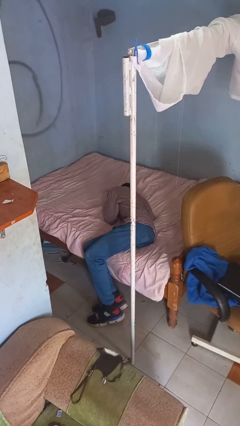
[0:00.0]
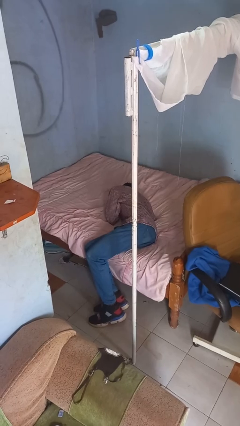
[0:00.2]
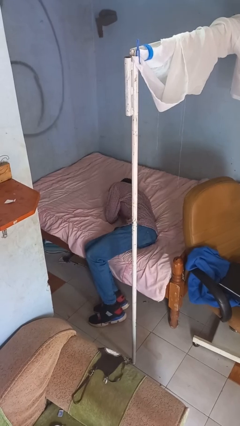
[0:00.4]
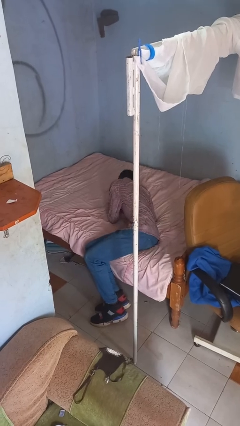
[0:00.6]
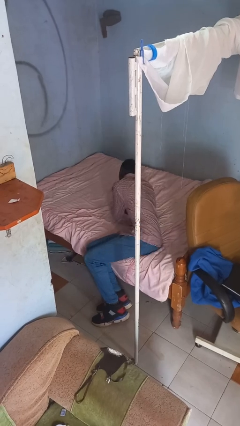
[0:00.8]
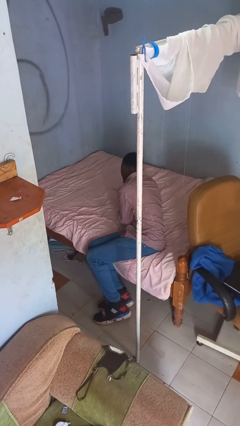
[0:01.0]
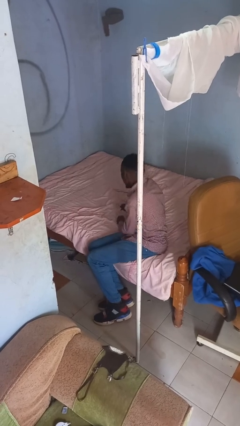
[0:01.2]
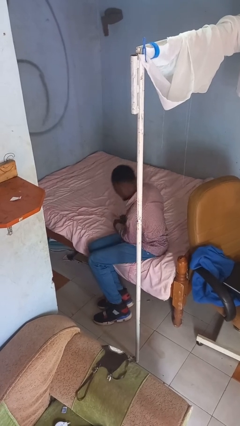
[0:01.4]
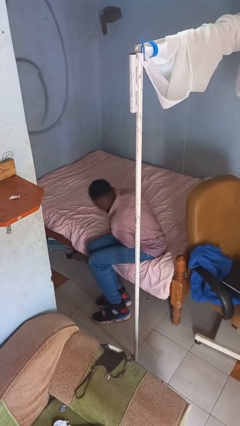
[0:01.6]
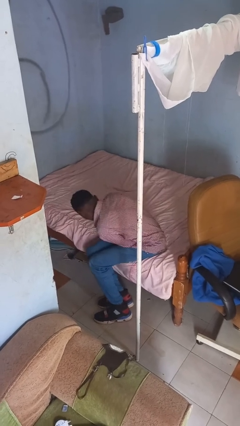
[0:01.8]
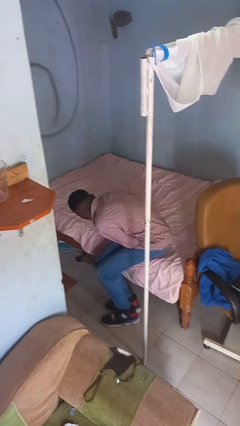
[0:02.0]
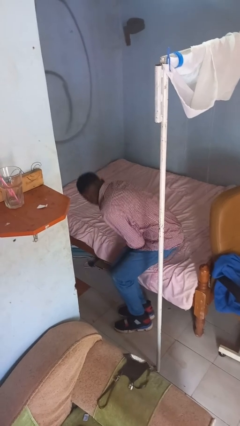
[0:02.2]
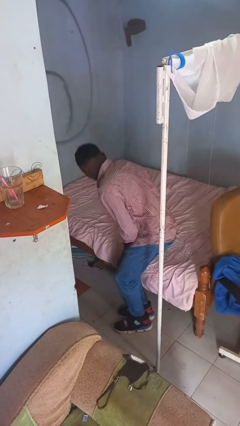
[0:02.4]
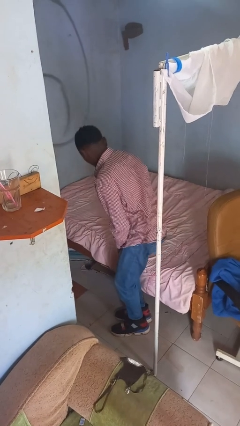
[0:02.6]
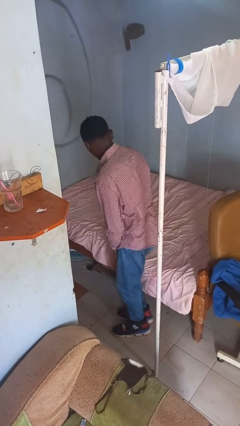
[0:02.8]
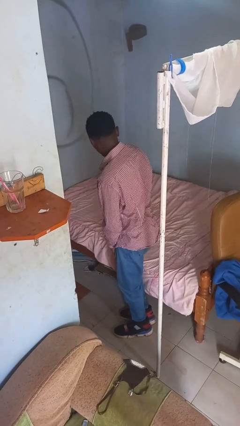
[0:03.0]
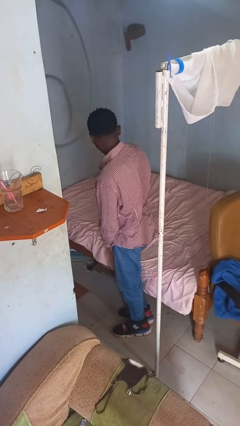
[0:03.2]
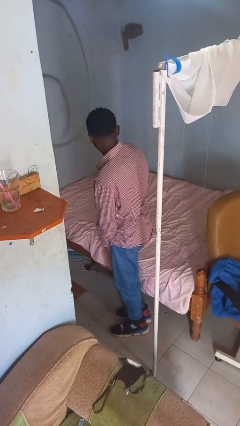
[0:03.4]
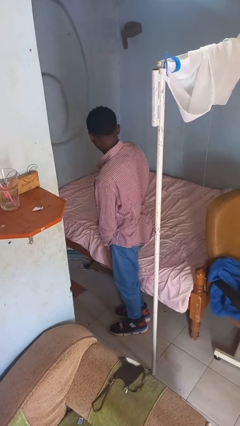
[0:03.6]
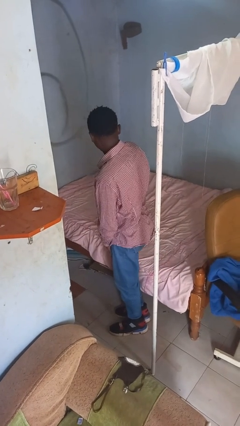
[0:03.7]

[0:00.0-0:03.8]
person stands up

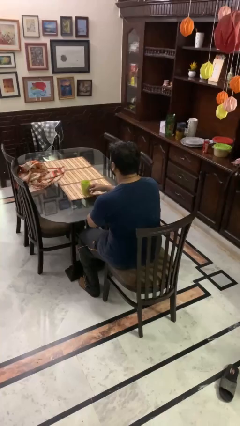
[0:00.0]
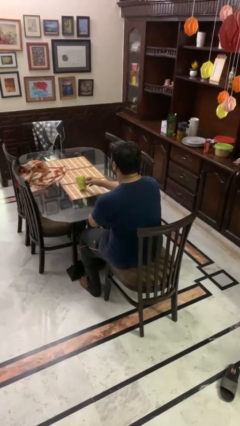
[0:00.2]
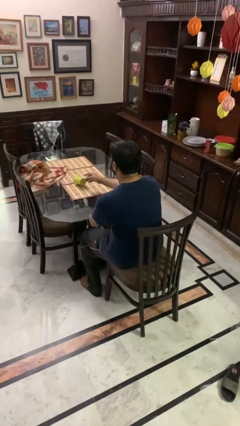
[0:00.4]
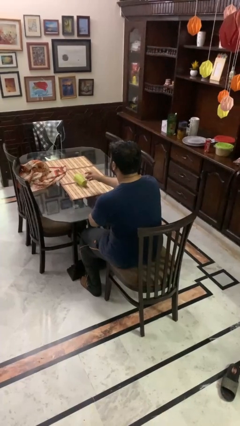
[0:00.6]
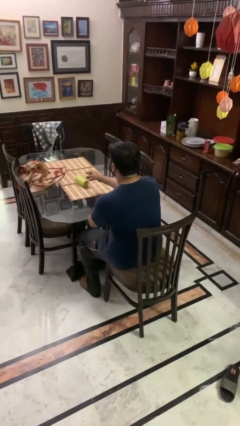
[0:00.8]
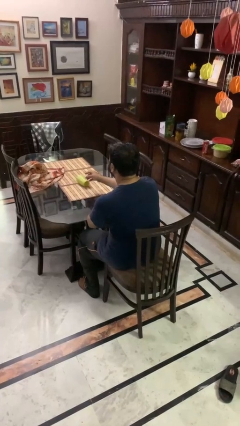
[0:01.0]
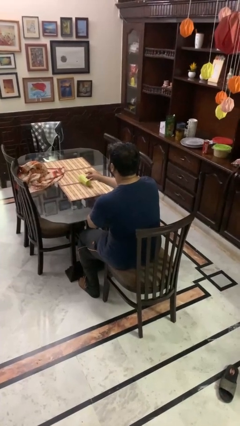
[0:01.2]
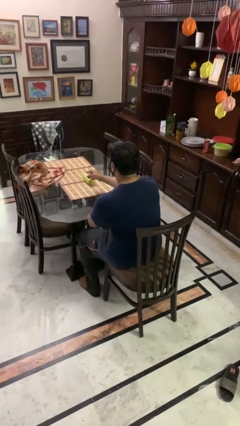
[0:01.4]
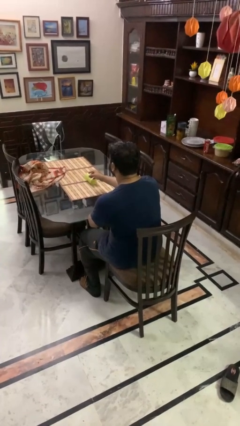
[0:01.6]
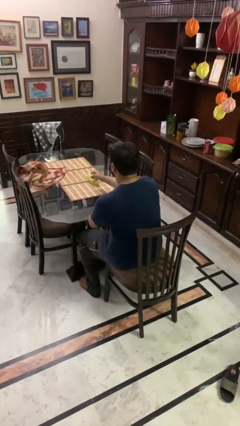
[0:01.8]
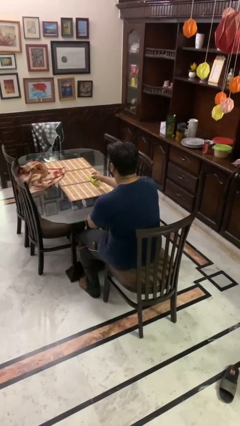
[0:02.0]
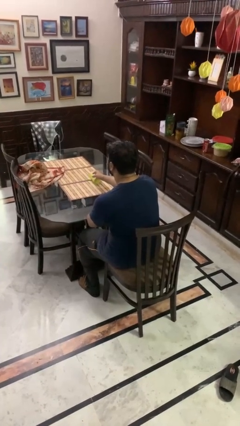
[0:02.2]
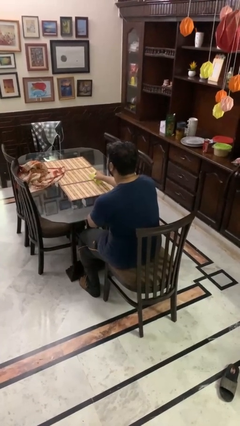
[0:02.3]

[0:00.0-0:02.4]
person knocks over glass

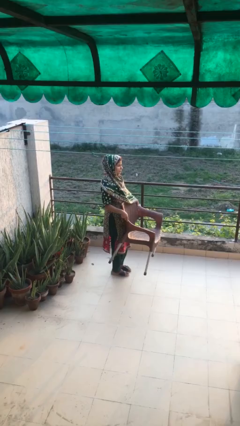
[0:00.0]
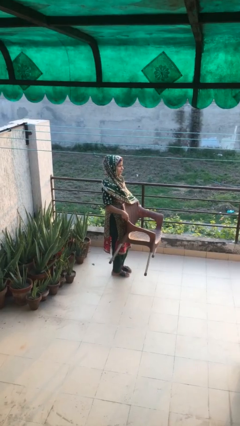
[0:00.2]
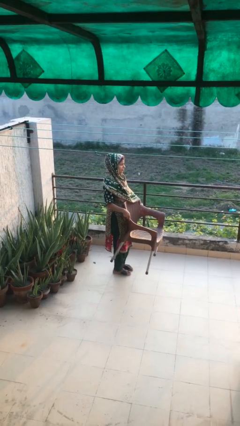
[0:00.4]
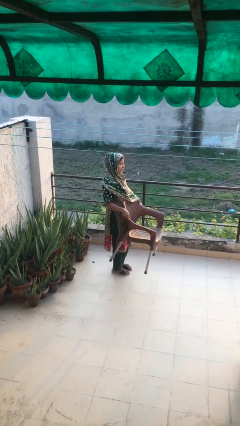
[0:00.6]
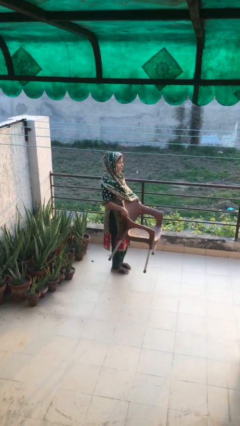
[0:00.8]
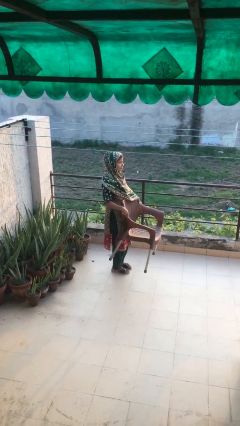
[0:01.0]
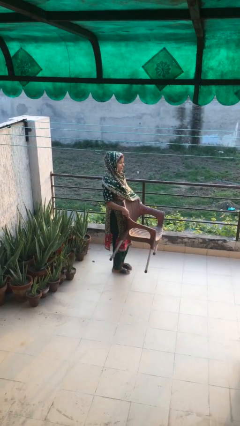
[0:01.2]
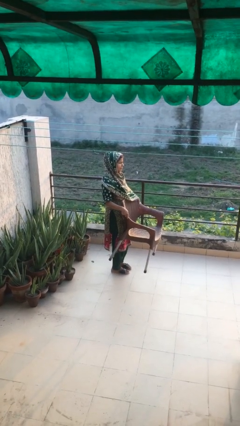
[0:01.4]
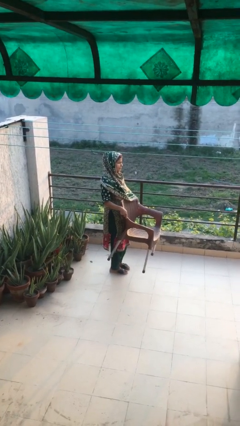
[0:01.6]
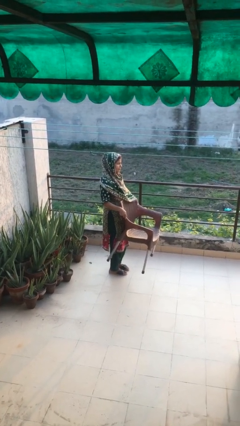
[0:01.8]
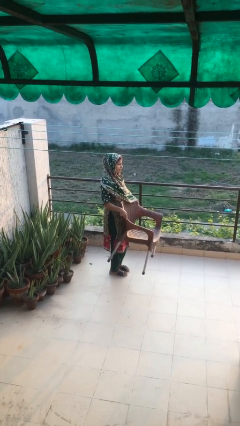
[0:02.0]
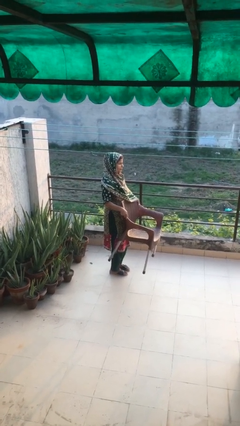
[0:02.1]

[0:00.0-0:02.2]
person carries heavy object

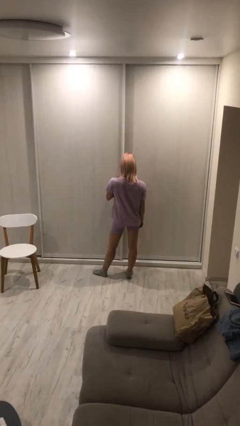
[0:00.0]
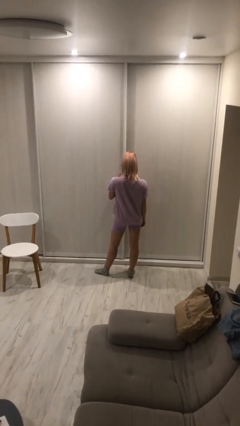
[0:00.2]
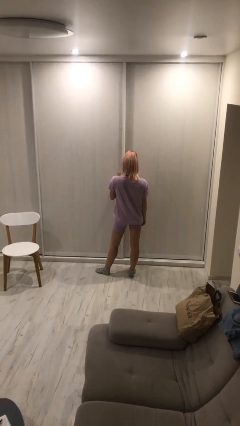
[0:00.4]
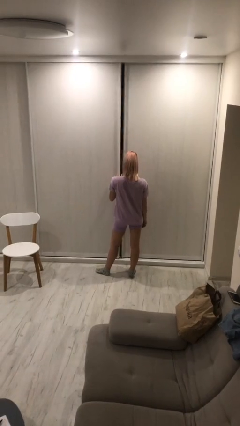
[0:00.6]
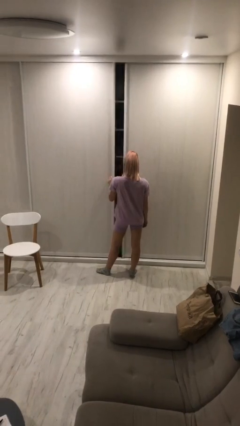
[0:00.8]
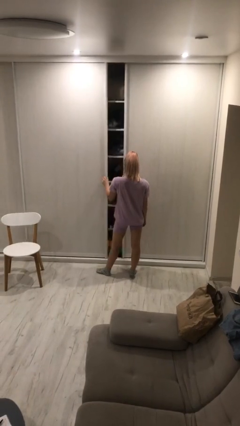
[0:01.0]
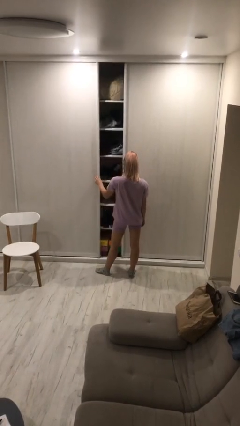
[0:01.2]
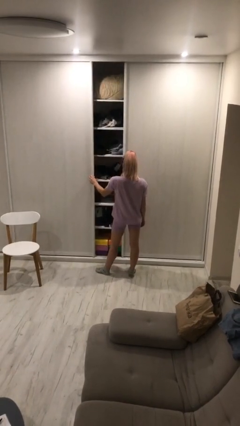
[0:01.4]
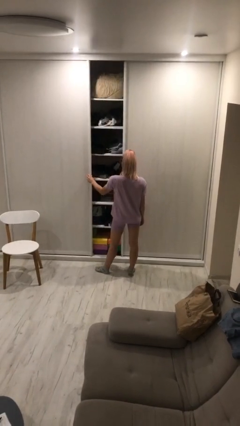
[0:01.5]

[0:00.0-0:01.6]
person opens sliding door

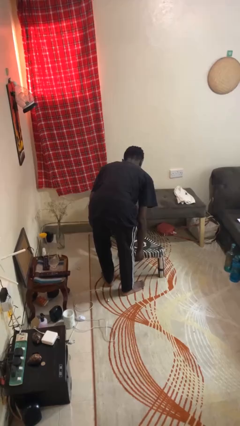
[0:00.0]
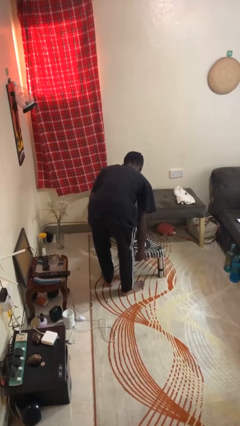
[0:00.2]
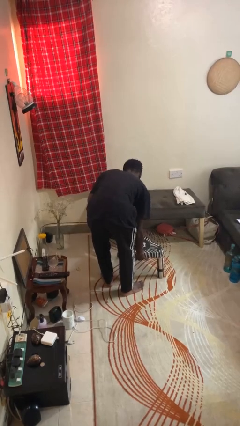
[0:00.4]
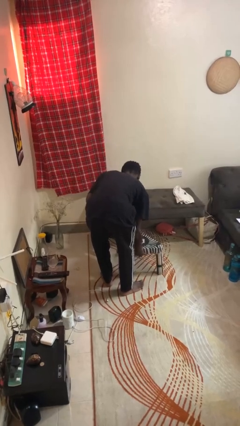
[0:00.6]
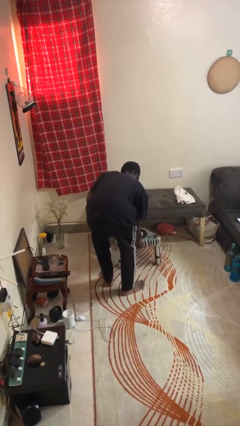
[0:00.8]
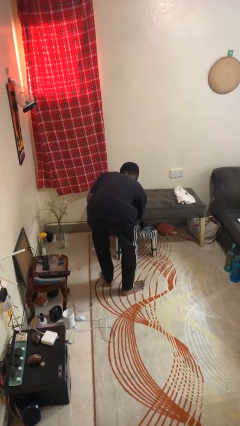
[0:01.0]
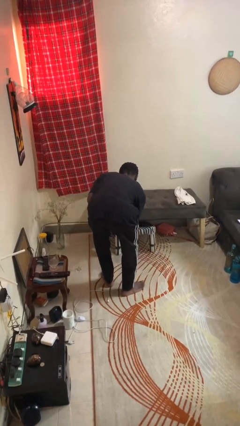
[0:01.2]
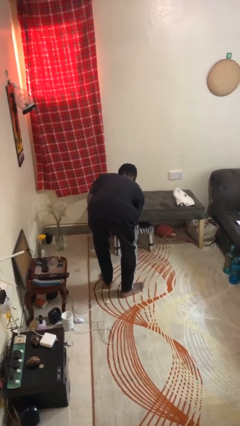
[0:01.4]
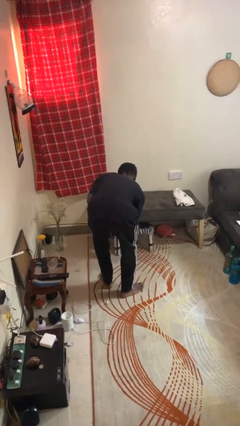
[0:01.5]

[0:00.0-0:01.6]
person pushes in chair

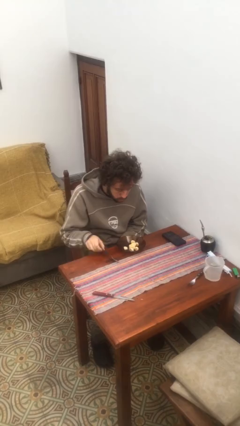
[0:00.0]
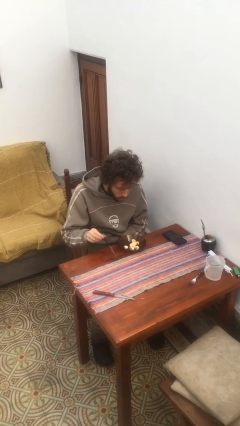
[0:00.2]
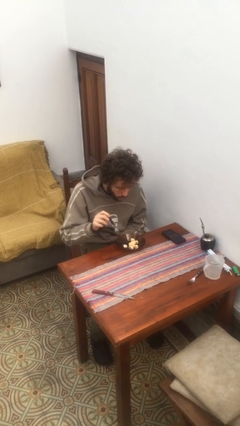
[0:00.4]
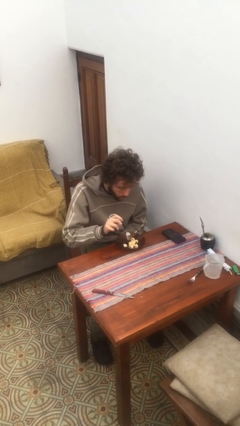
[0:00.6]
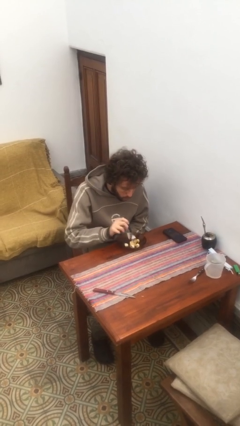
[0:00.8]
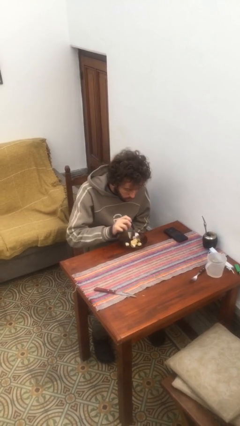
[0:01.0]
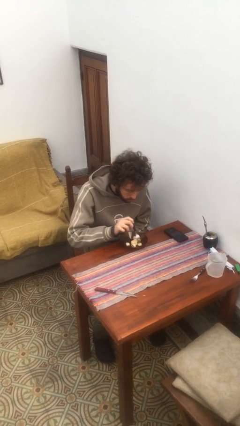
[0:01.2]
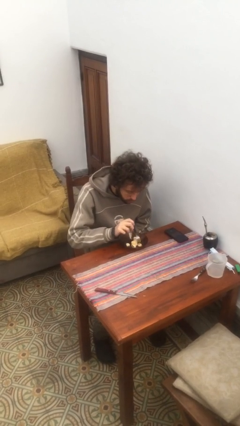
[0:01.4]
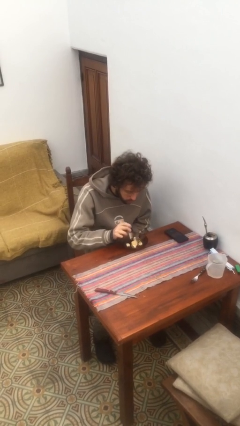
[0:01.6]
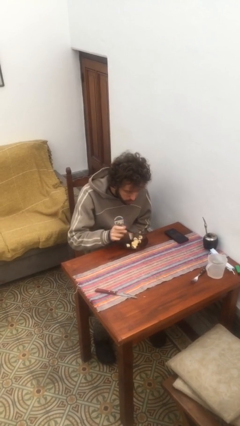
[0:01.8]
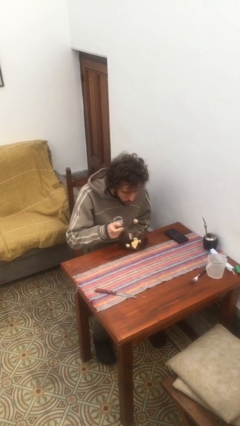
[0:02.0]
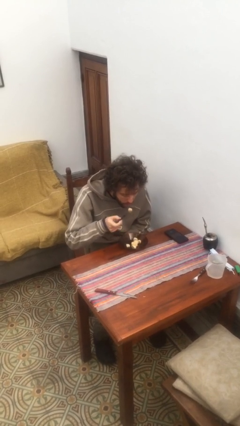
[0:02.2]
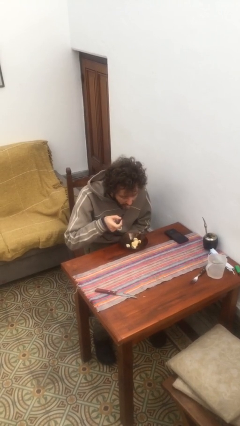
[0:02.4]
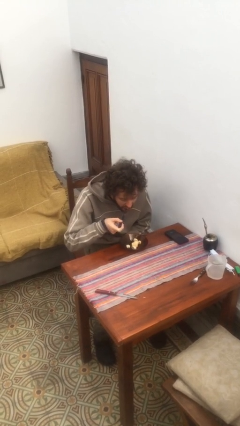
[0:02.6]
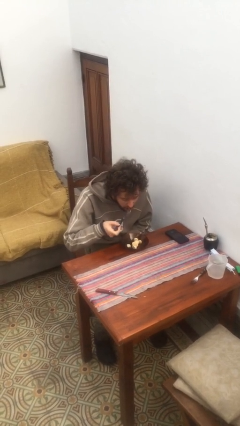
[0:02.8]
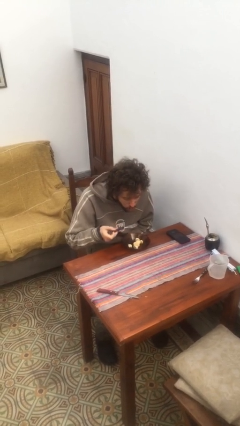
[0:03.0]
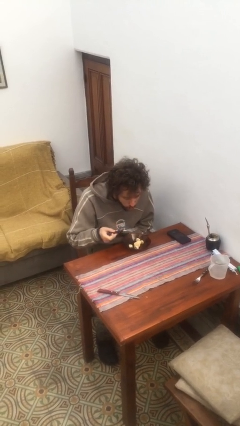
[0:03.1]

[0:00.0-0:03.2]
person eats with utensil

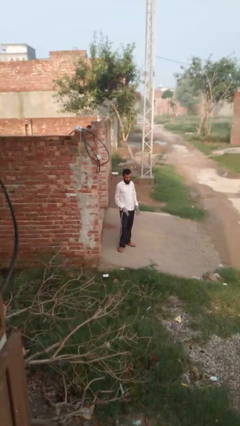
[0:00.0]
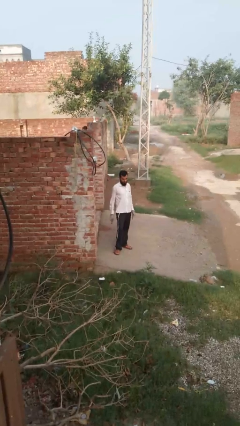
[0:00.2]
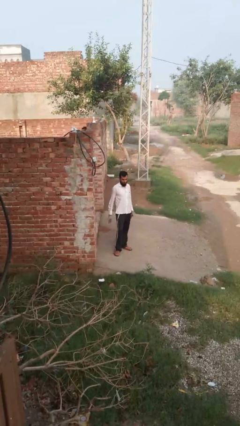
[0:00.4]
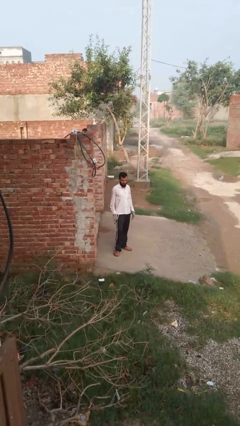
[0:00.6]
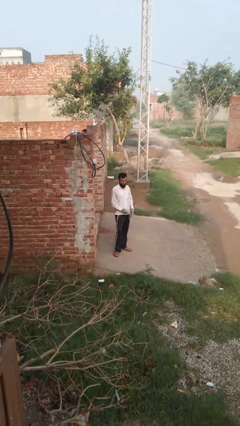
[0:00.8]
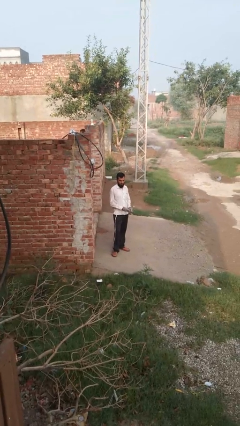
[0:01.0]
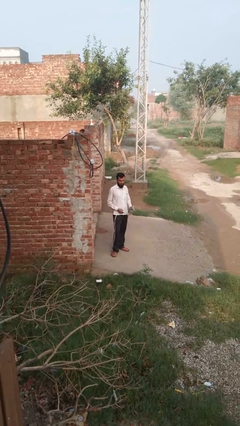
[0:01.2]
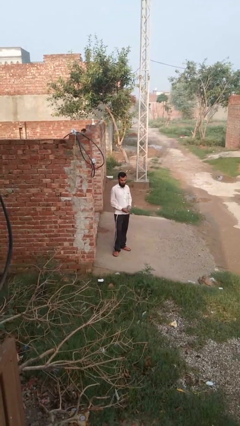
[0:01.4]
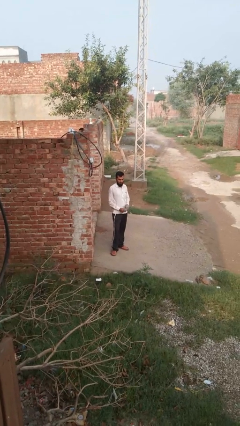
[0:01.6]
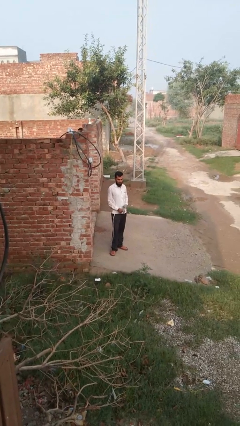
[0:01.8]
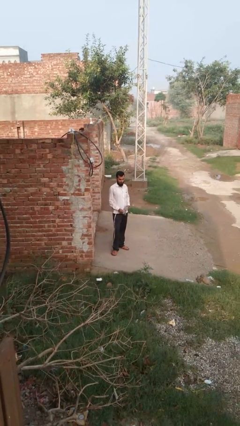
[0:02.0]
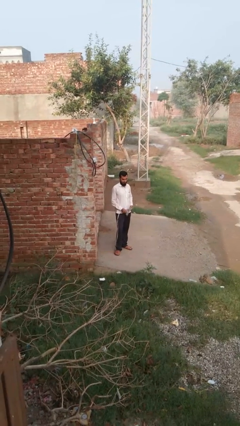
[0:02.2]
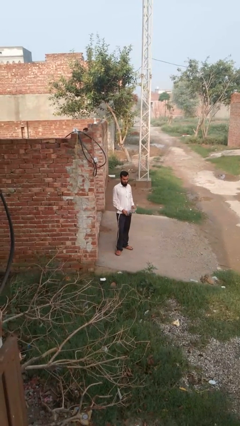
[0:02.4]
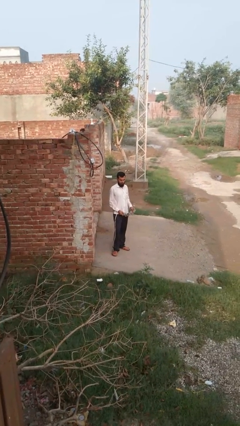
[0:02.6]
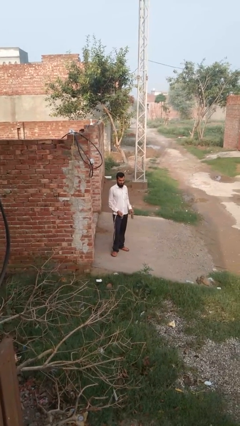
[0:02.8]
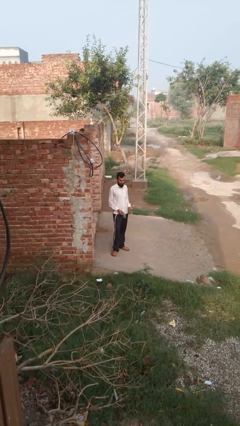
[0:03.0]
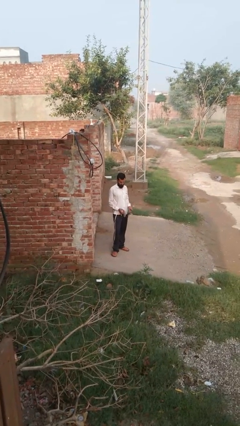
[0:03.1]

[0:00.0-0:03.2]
person takes off gloves
